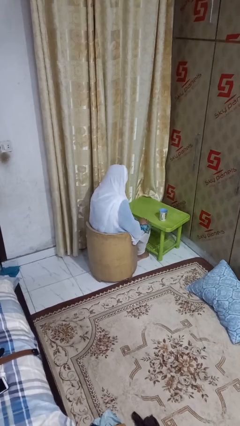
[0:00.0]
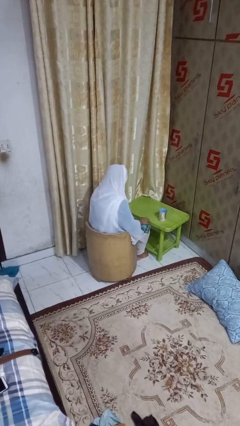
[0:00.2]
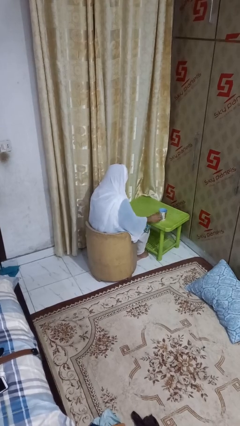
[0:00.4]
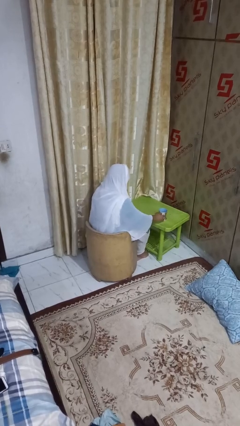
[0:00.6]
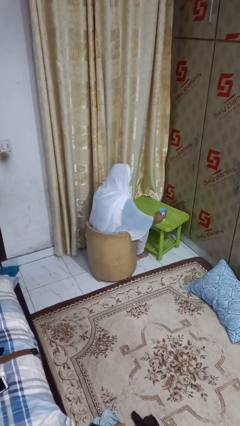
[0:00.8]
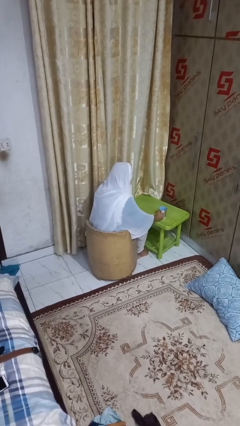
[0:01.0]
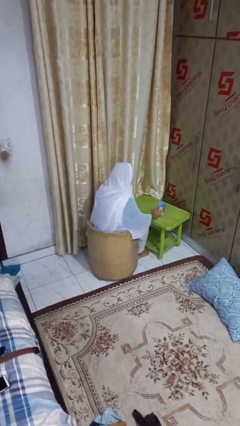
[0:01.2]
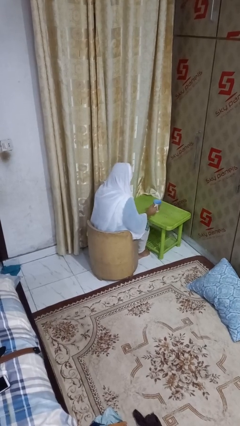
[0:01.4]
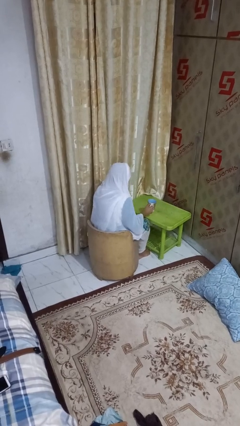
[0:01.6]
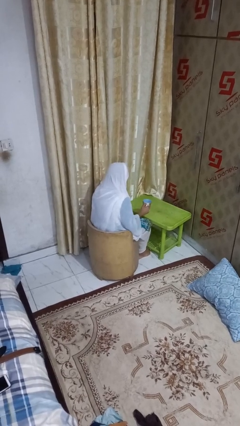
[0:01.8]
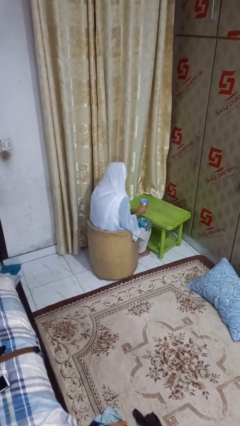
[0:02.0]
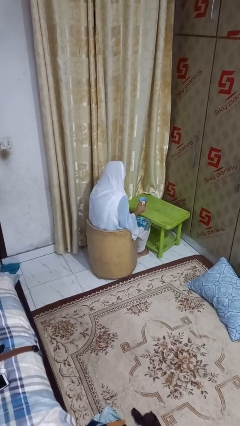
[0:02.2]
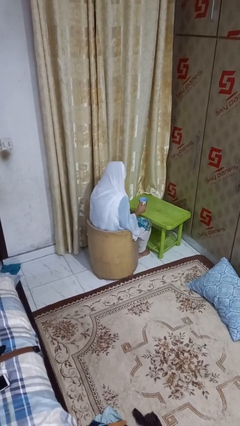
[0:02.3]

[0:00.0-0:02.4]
person picks up object from table

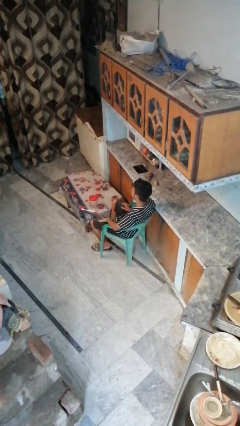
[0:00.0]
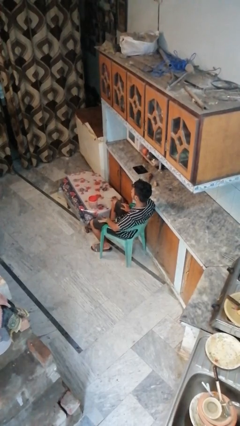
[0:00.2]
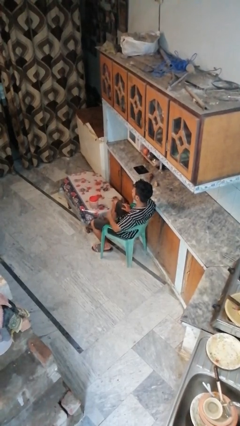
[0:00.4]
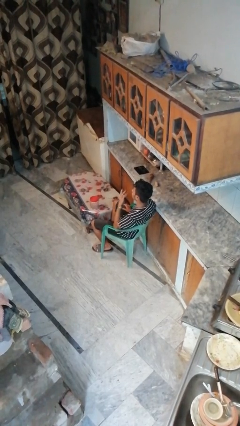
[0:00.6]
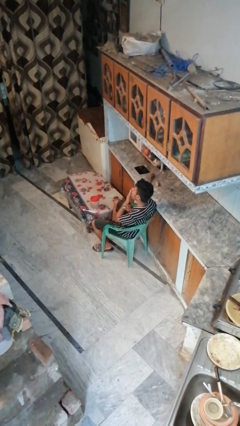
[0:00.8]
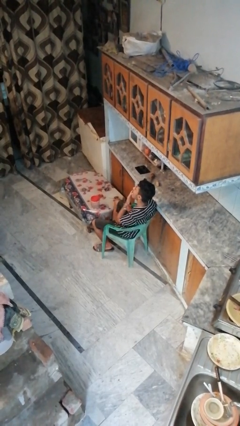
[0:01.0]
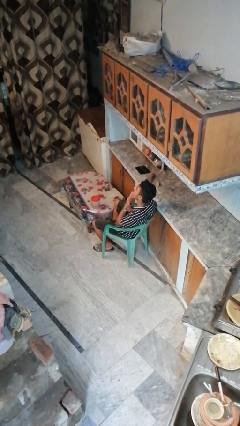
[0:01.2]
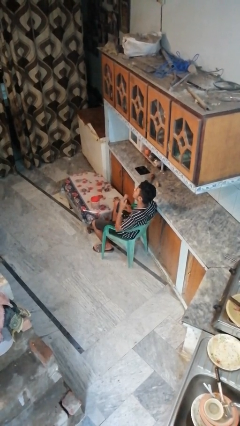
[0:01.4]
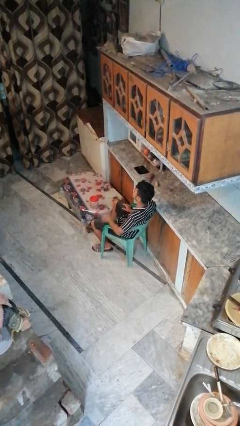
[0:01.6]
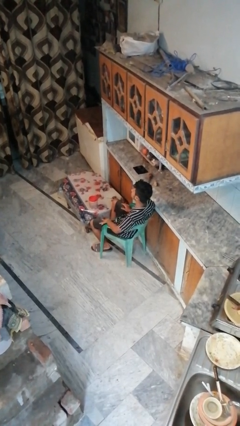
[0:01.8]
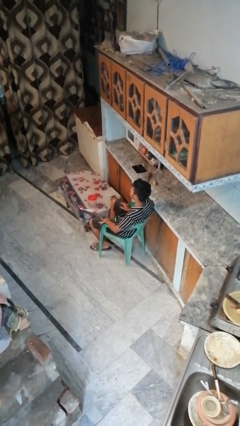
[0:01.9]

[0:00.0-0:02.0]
person licks fingers

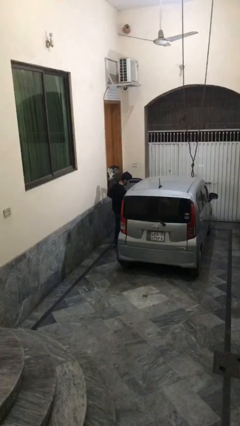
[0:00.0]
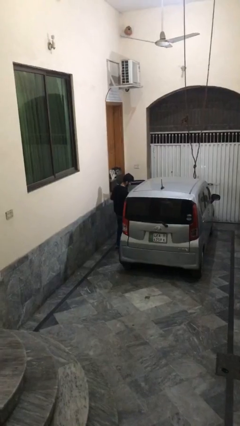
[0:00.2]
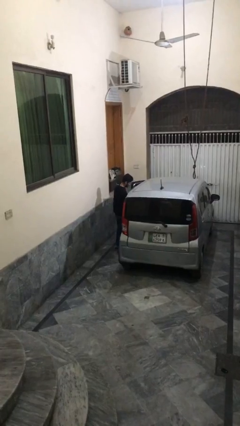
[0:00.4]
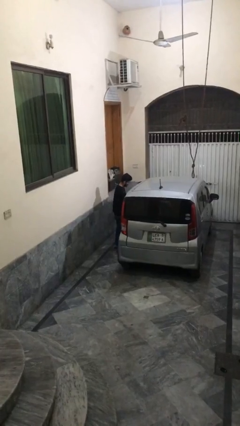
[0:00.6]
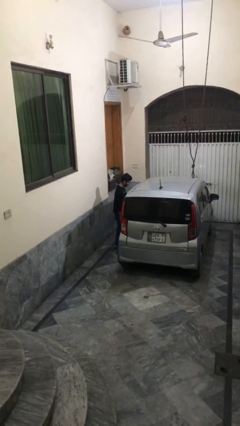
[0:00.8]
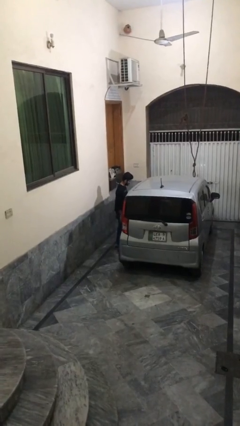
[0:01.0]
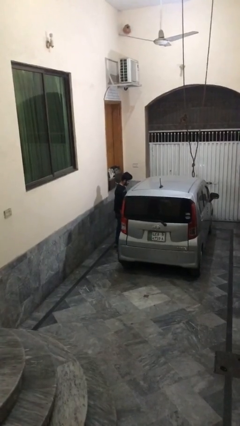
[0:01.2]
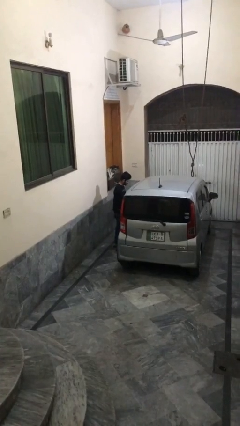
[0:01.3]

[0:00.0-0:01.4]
person closes car door

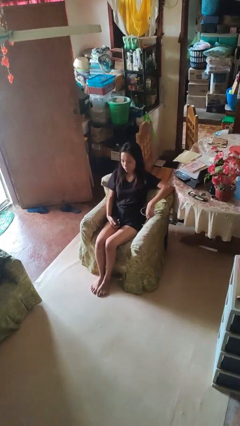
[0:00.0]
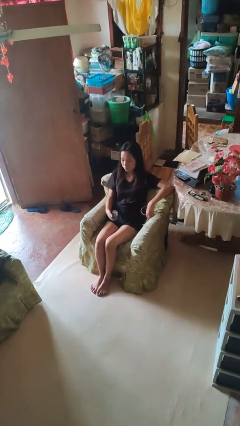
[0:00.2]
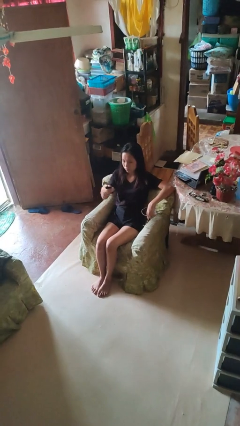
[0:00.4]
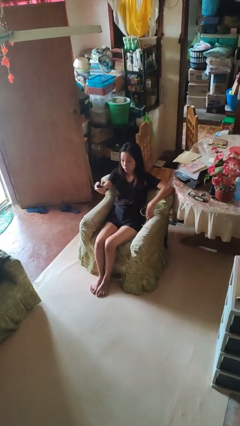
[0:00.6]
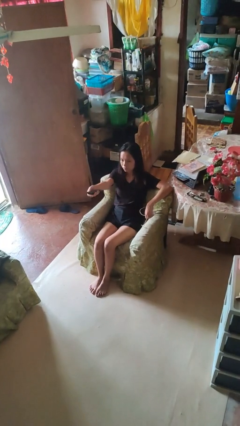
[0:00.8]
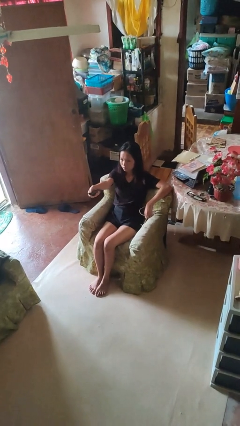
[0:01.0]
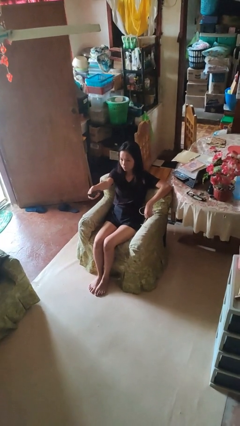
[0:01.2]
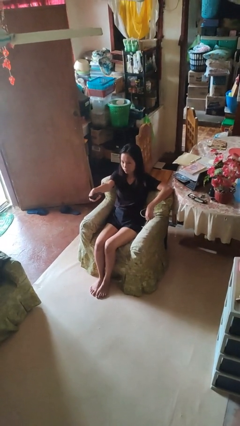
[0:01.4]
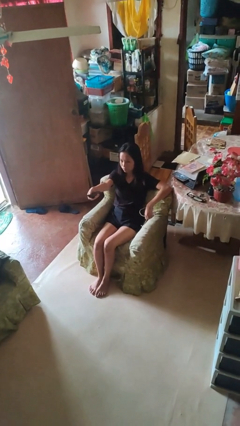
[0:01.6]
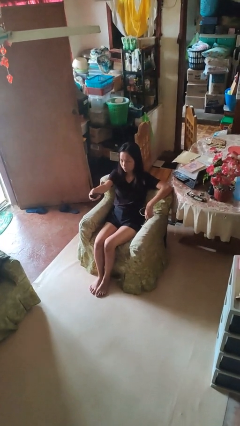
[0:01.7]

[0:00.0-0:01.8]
person uses television remote

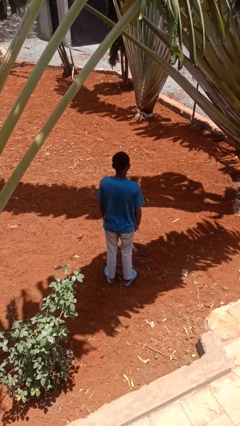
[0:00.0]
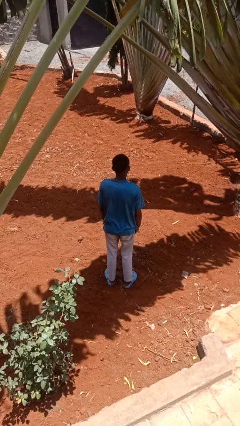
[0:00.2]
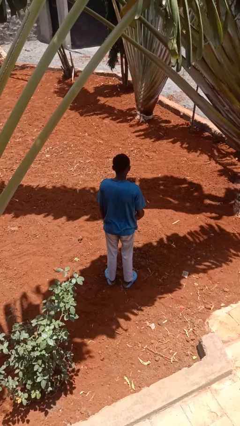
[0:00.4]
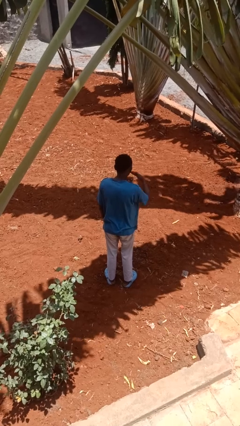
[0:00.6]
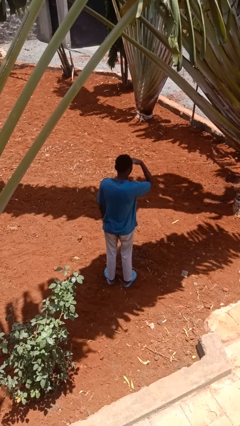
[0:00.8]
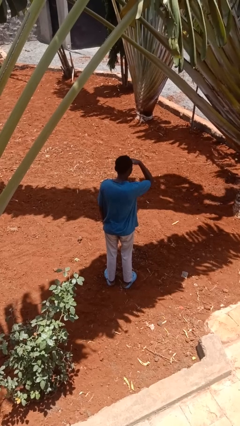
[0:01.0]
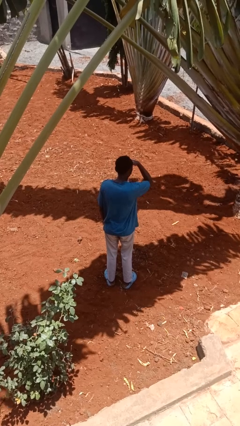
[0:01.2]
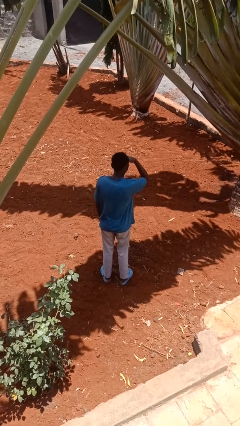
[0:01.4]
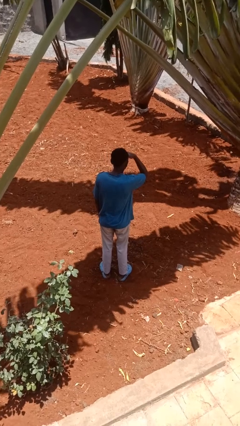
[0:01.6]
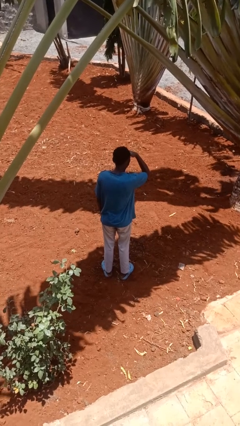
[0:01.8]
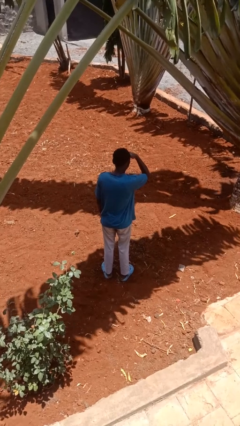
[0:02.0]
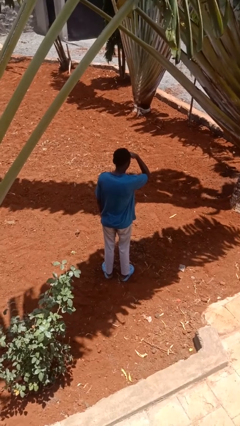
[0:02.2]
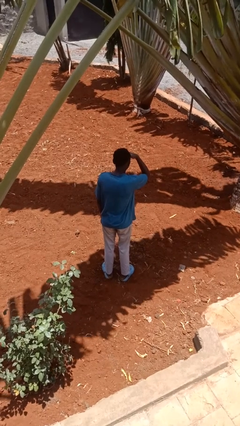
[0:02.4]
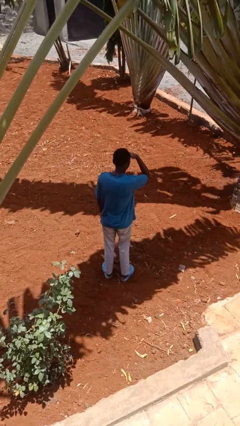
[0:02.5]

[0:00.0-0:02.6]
person shades eyes

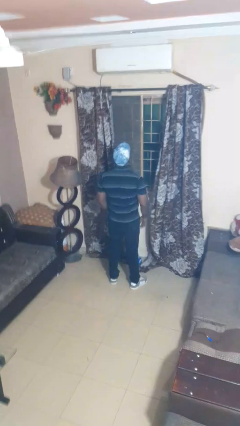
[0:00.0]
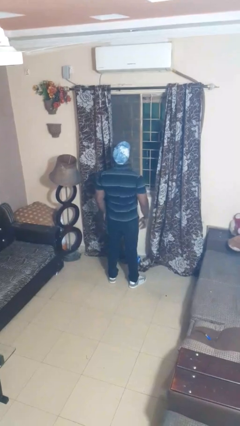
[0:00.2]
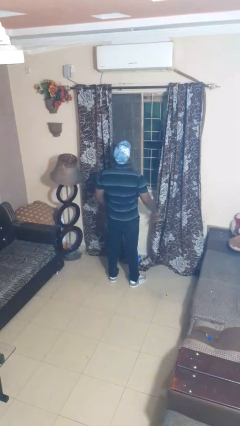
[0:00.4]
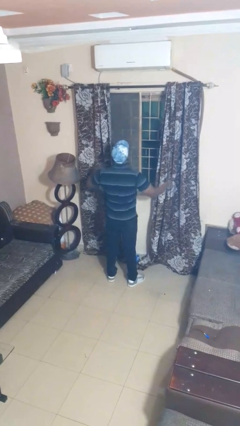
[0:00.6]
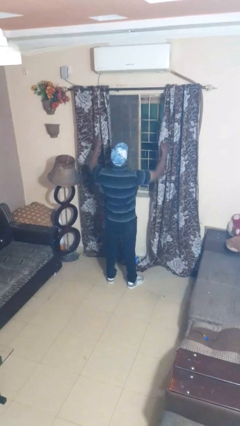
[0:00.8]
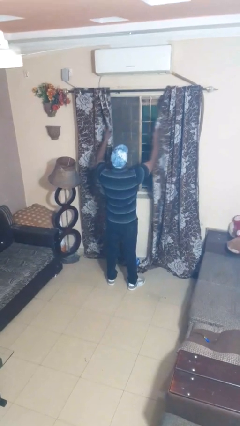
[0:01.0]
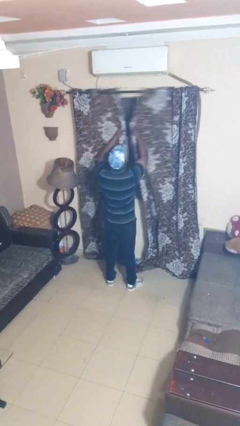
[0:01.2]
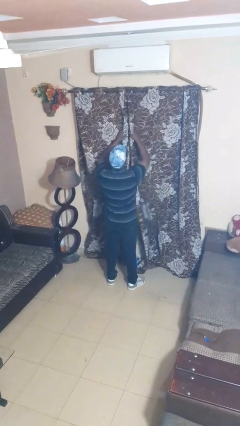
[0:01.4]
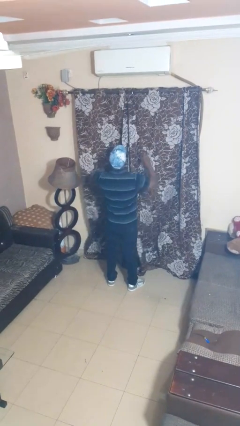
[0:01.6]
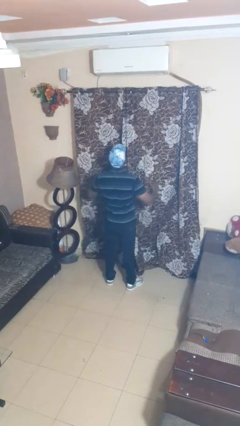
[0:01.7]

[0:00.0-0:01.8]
person closes curtains

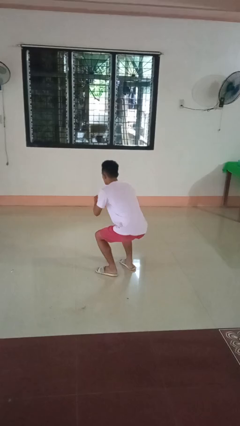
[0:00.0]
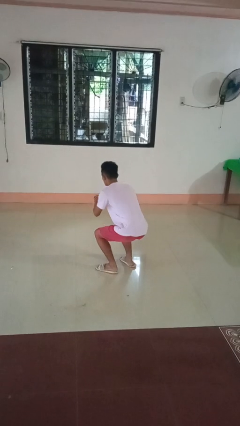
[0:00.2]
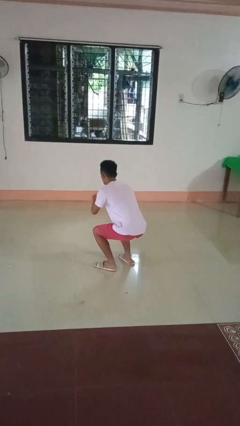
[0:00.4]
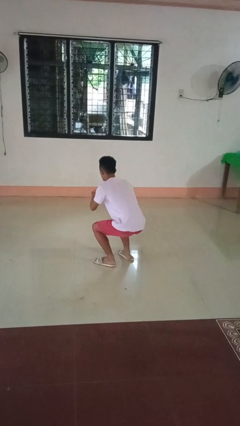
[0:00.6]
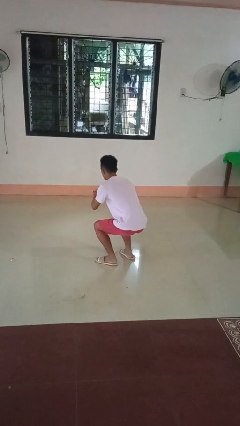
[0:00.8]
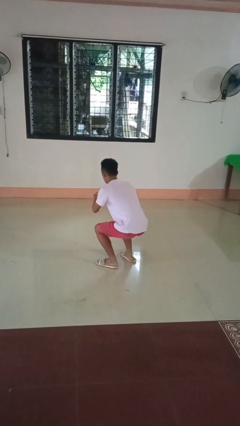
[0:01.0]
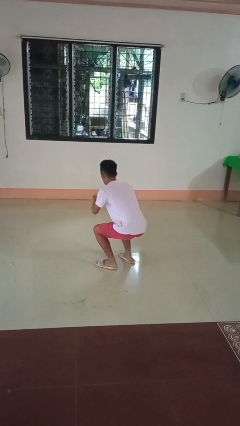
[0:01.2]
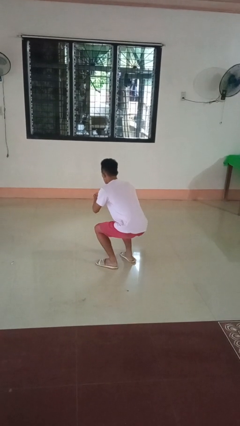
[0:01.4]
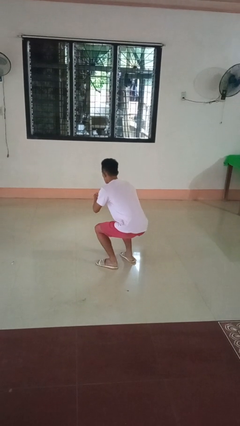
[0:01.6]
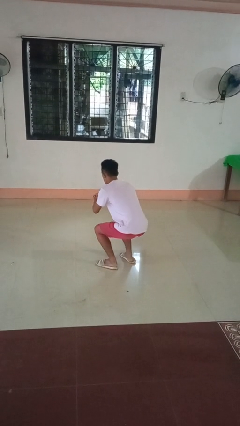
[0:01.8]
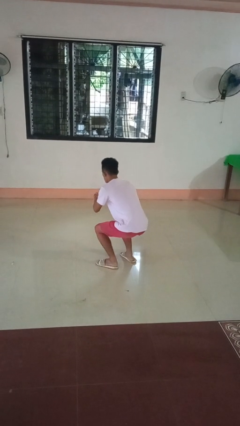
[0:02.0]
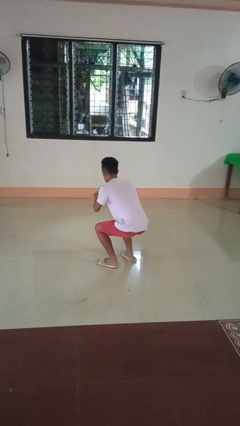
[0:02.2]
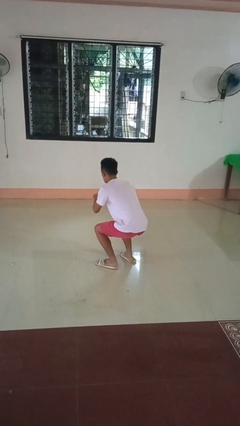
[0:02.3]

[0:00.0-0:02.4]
person squats

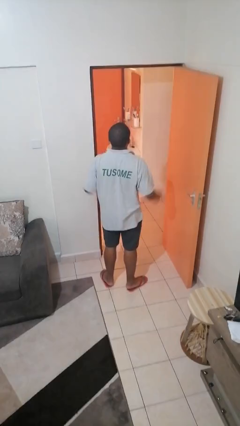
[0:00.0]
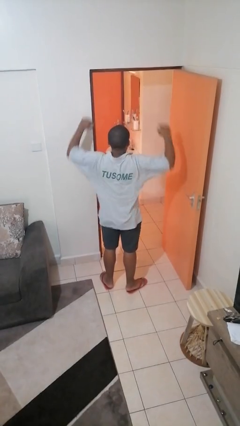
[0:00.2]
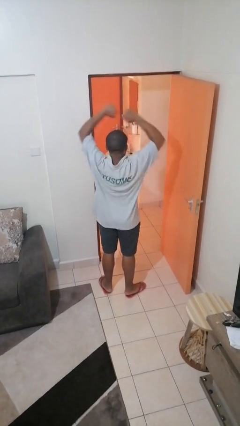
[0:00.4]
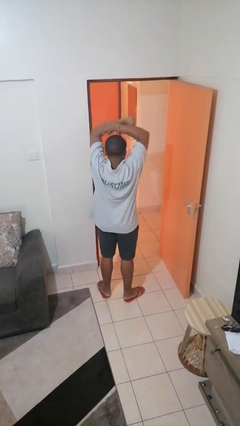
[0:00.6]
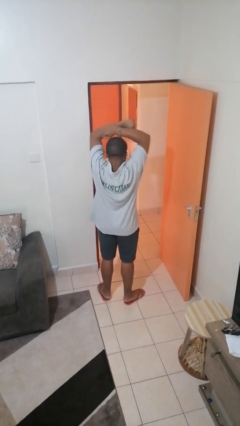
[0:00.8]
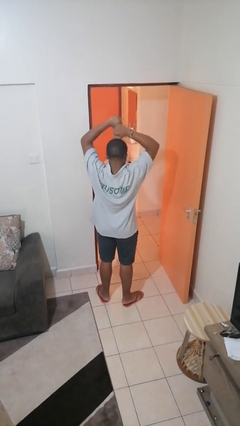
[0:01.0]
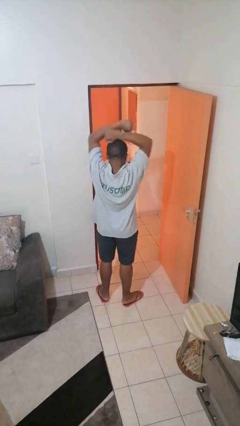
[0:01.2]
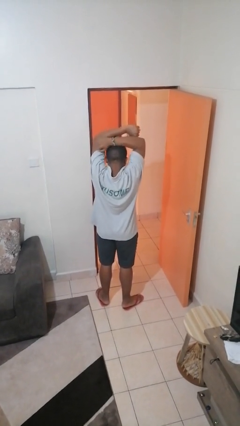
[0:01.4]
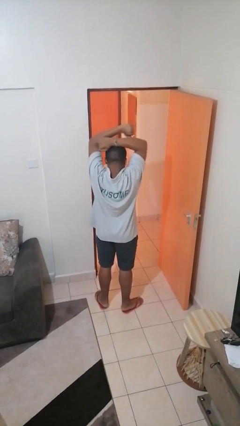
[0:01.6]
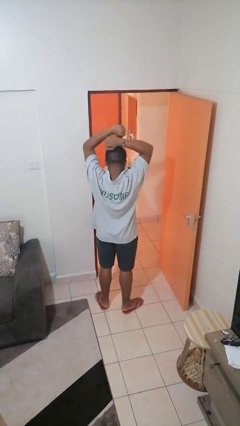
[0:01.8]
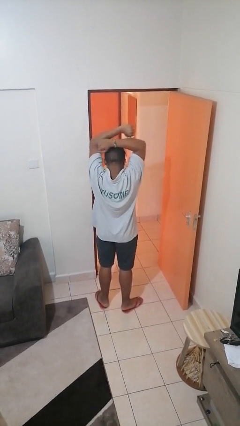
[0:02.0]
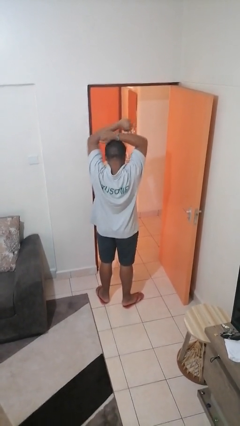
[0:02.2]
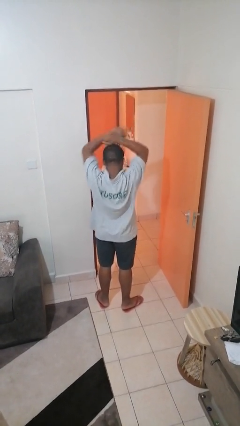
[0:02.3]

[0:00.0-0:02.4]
person stretches arms over head
